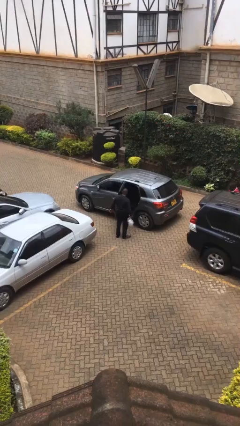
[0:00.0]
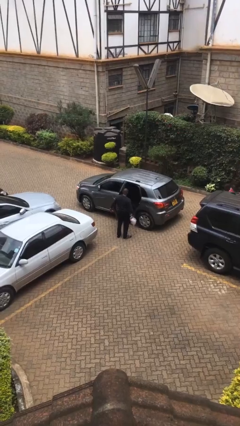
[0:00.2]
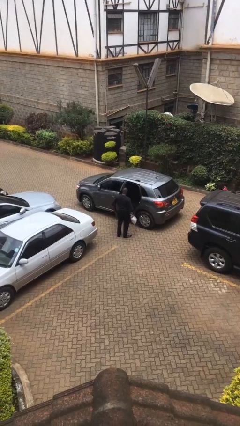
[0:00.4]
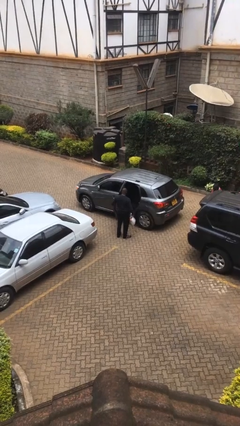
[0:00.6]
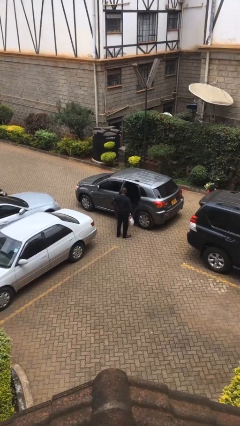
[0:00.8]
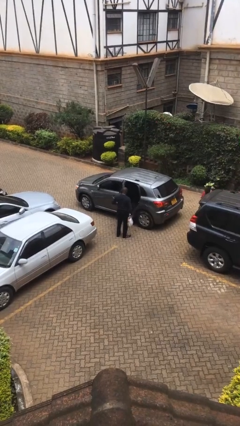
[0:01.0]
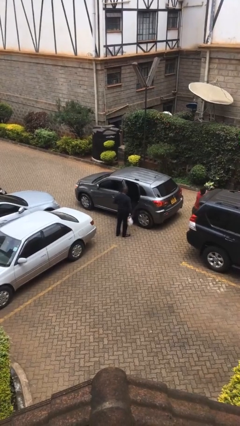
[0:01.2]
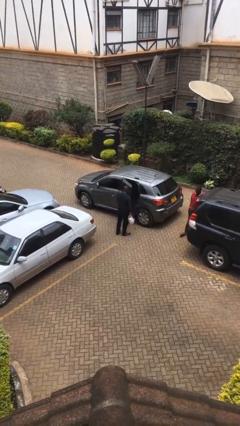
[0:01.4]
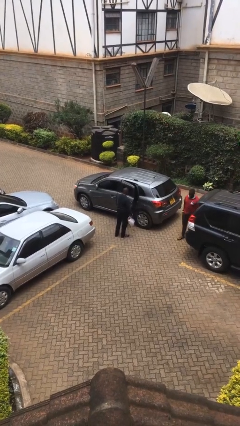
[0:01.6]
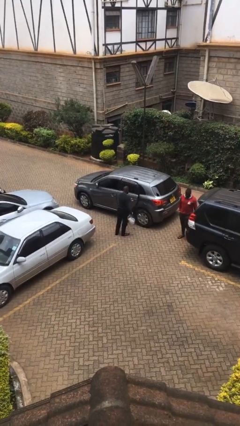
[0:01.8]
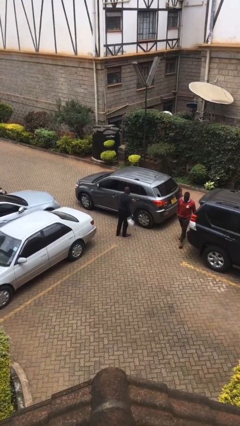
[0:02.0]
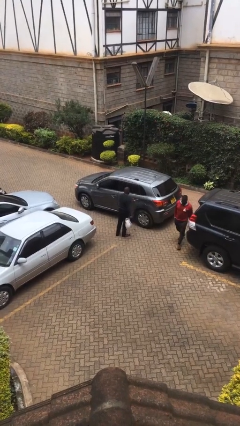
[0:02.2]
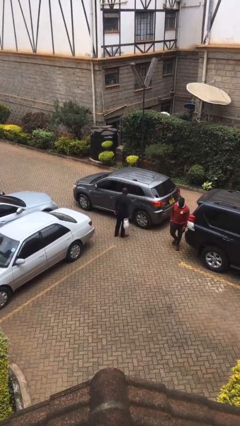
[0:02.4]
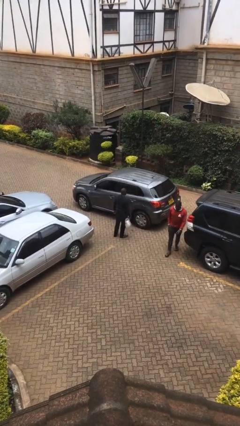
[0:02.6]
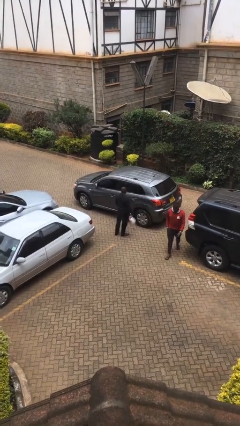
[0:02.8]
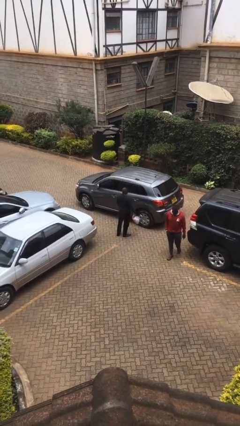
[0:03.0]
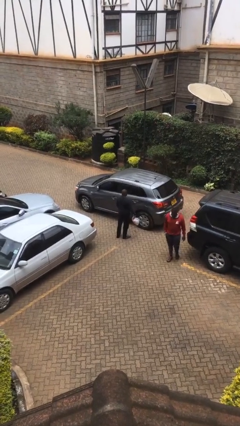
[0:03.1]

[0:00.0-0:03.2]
person closes car door

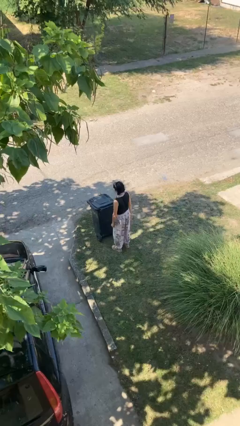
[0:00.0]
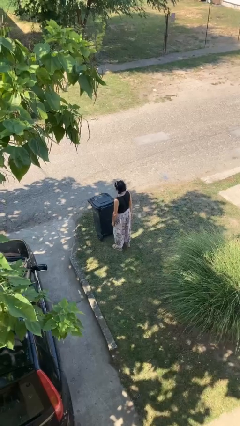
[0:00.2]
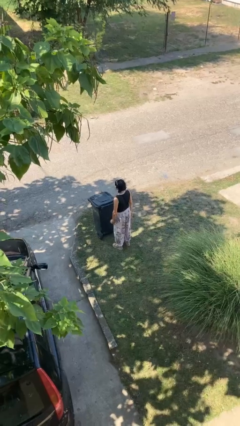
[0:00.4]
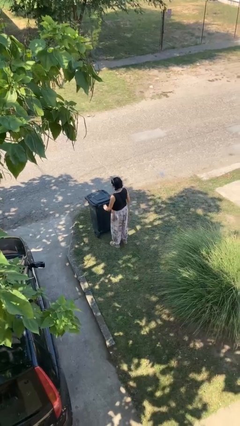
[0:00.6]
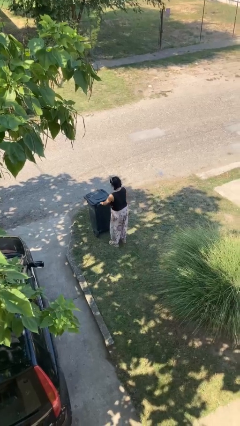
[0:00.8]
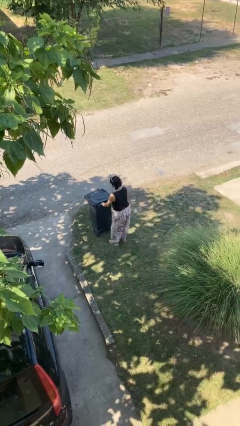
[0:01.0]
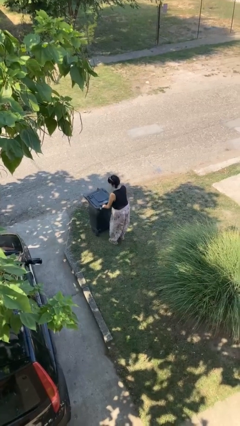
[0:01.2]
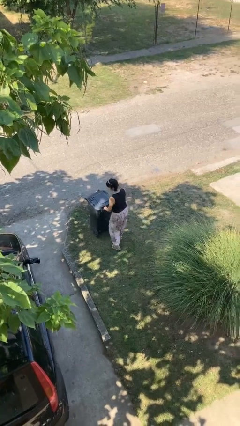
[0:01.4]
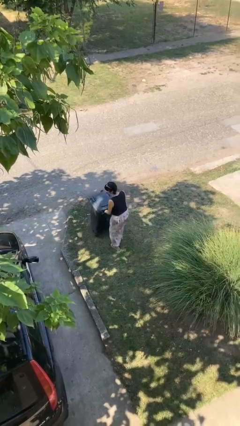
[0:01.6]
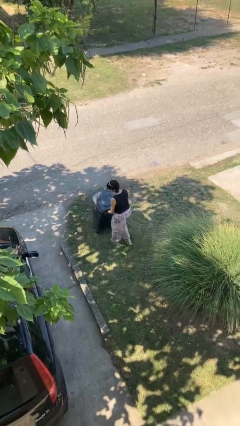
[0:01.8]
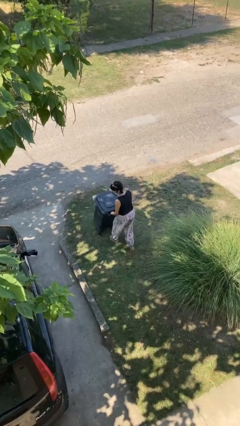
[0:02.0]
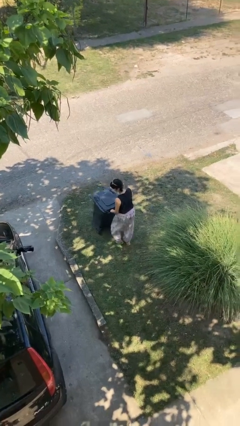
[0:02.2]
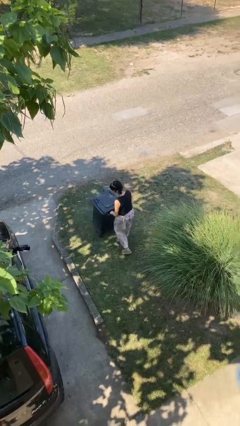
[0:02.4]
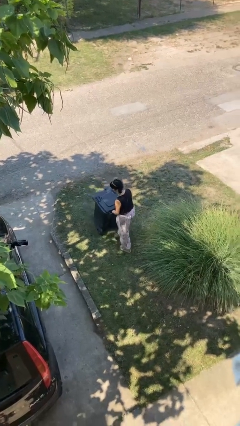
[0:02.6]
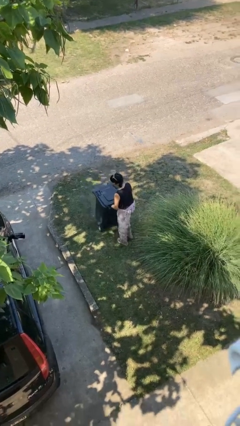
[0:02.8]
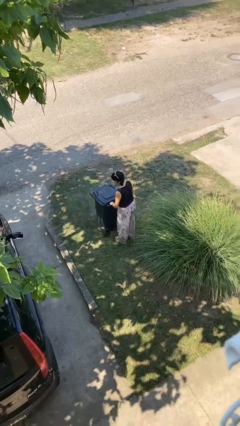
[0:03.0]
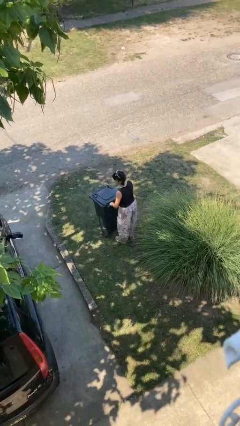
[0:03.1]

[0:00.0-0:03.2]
person pulls wheeled trashcan

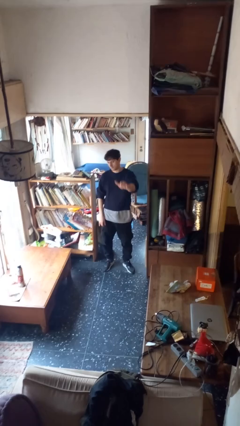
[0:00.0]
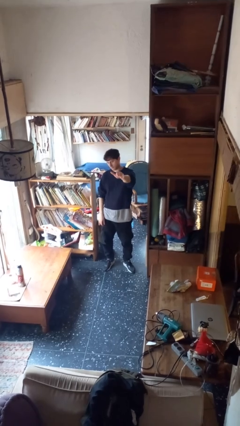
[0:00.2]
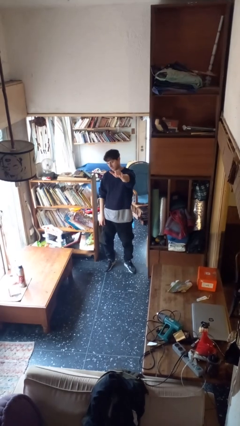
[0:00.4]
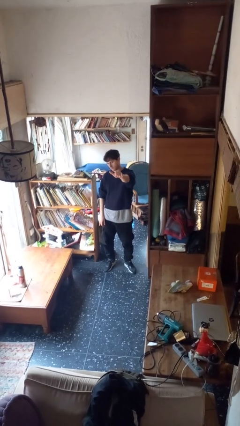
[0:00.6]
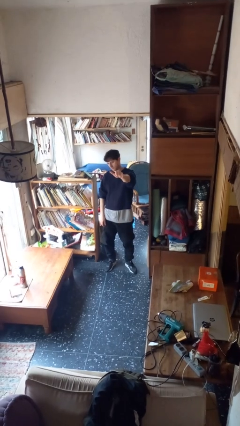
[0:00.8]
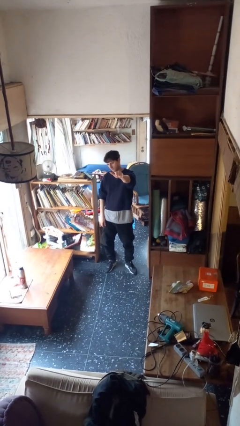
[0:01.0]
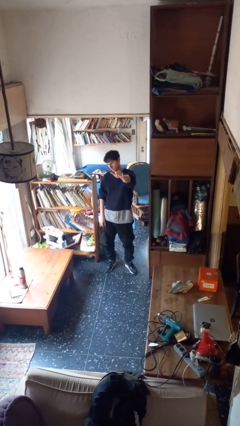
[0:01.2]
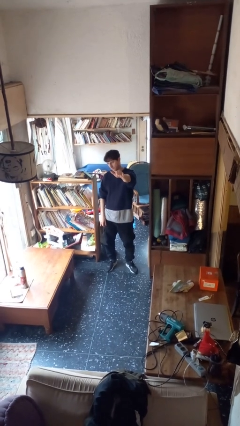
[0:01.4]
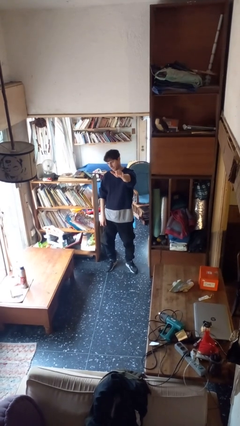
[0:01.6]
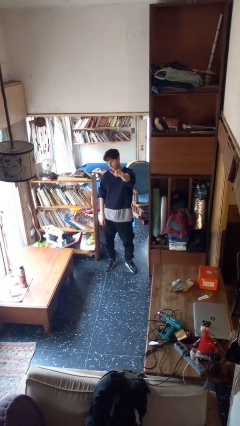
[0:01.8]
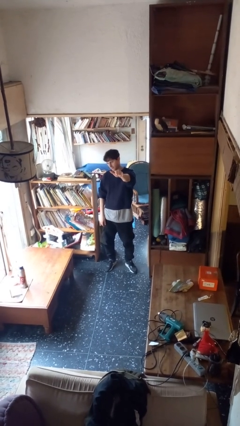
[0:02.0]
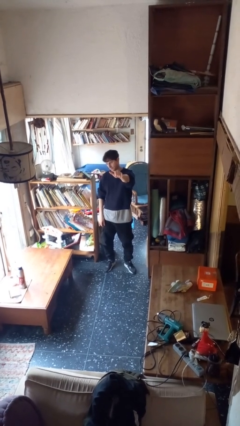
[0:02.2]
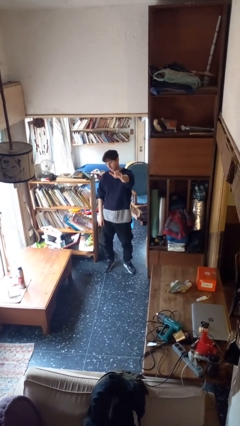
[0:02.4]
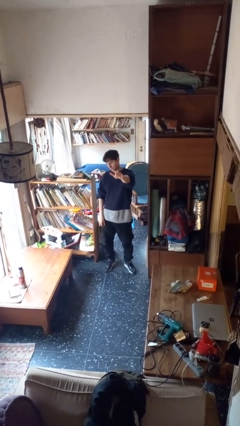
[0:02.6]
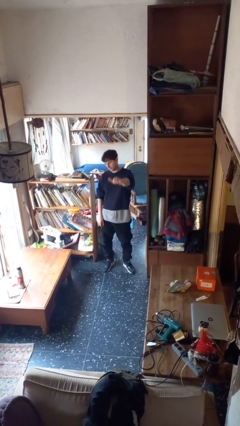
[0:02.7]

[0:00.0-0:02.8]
person gestures hang loose

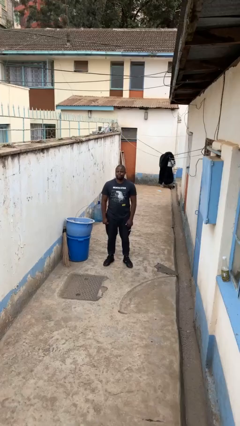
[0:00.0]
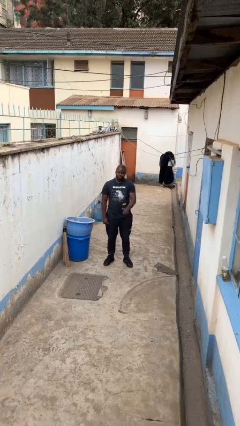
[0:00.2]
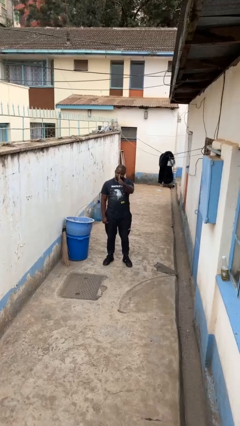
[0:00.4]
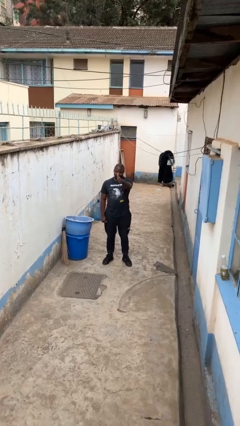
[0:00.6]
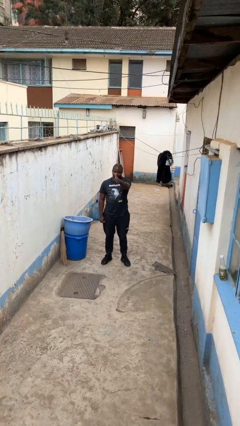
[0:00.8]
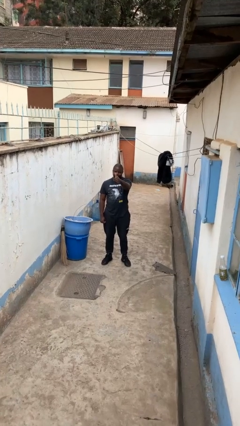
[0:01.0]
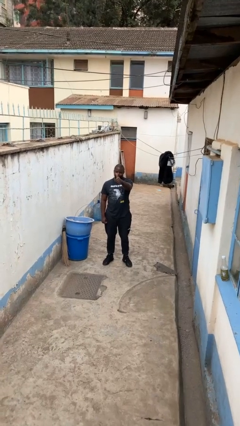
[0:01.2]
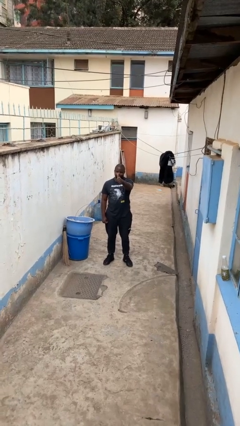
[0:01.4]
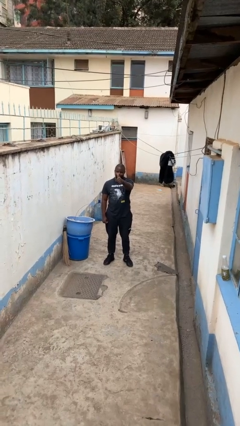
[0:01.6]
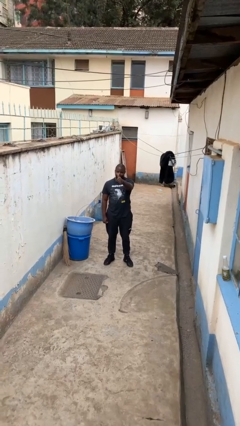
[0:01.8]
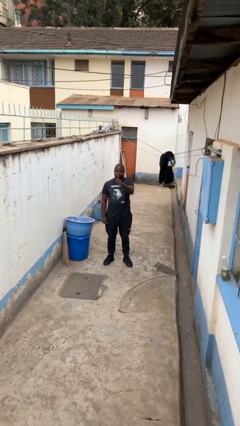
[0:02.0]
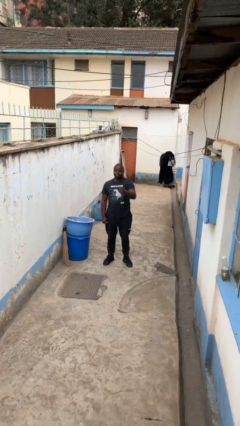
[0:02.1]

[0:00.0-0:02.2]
person gestures thumbs up

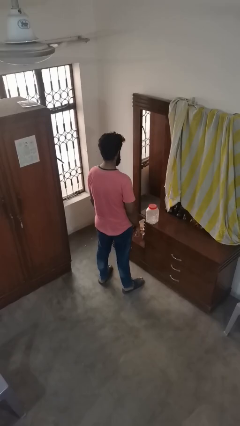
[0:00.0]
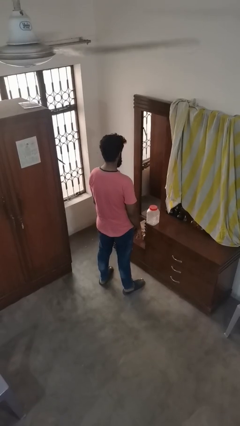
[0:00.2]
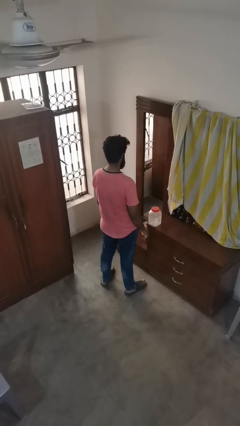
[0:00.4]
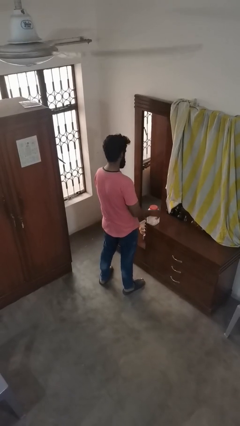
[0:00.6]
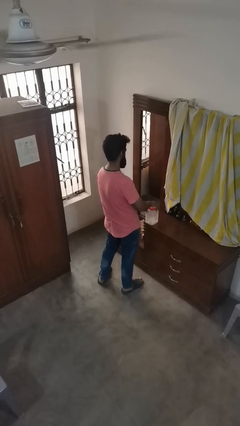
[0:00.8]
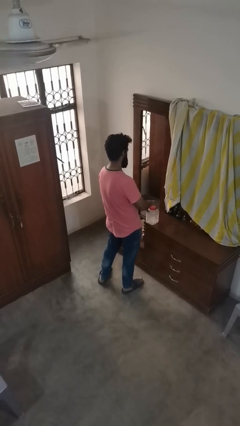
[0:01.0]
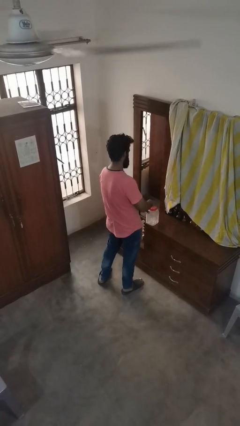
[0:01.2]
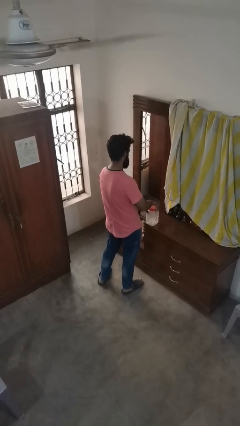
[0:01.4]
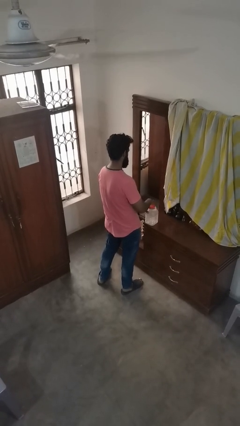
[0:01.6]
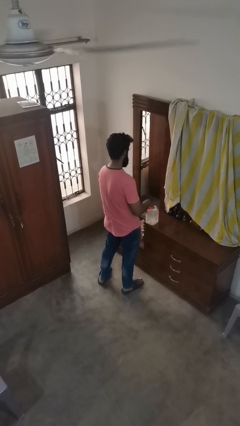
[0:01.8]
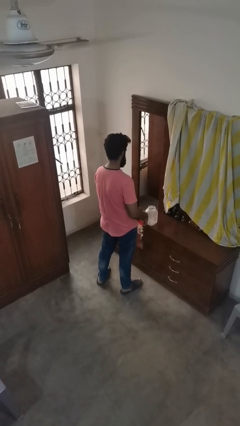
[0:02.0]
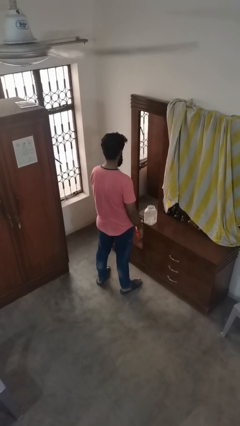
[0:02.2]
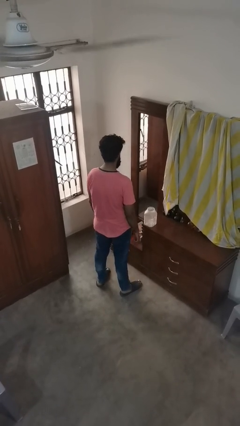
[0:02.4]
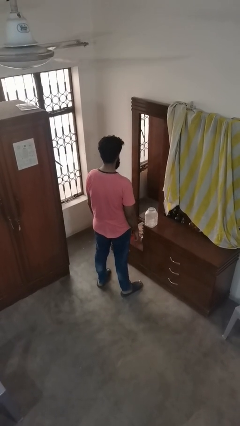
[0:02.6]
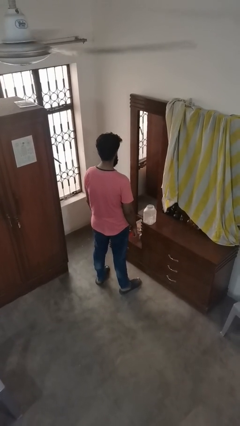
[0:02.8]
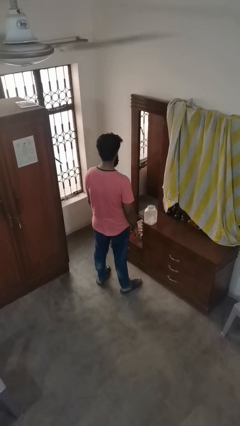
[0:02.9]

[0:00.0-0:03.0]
person opens jar

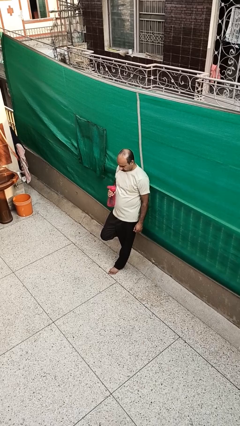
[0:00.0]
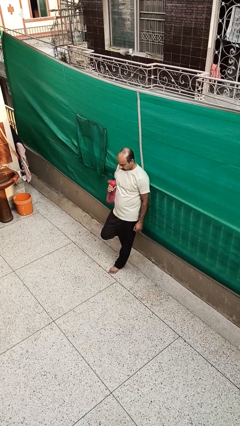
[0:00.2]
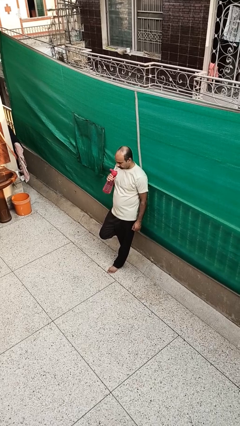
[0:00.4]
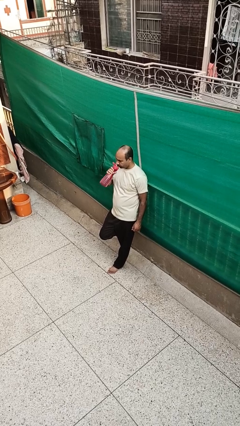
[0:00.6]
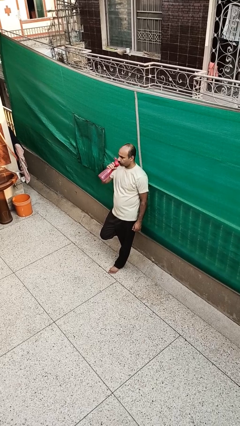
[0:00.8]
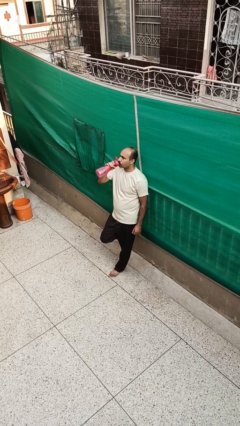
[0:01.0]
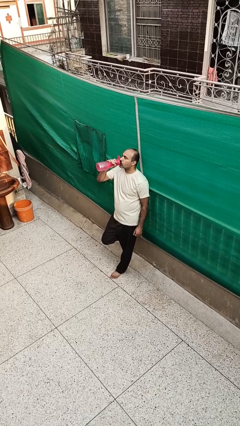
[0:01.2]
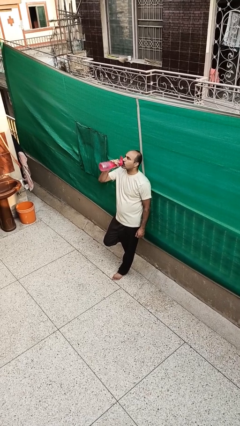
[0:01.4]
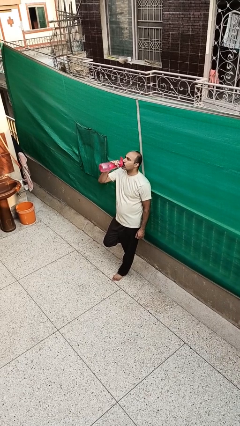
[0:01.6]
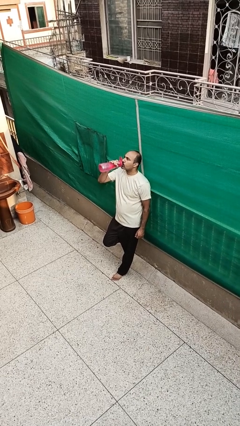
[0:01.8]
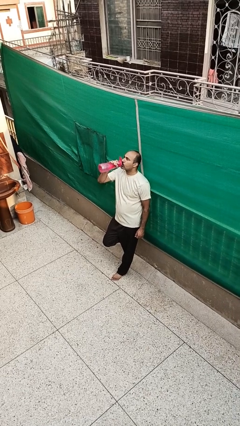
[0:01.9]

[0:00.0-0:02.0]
person drinks from bottle

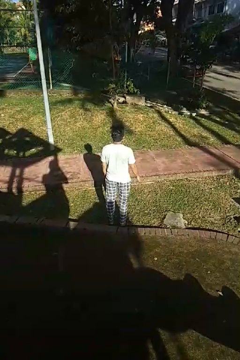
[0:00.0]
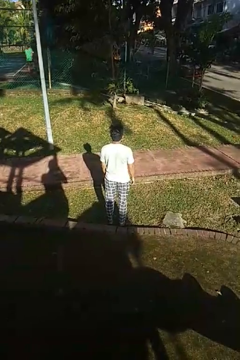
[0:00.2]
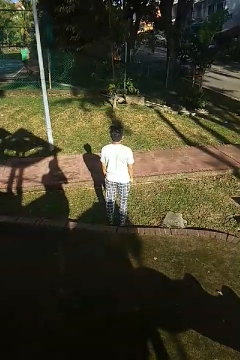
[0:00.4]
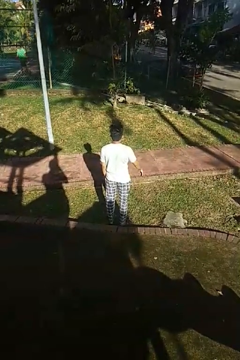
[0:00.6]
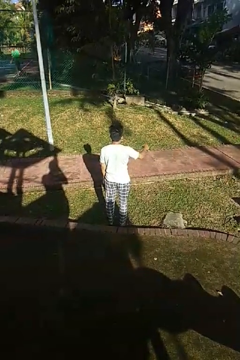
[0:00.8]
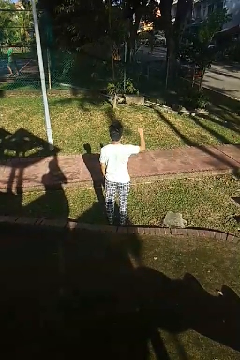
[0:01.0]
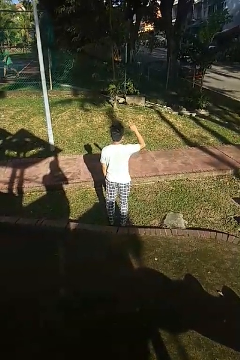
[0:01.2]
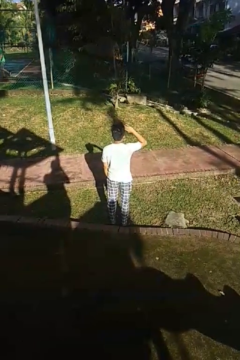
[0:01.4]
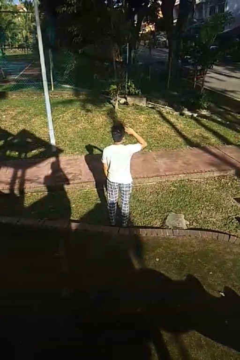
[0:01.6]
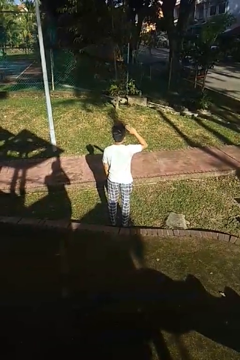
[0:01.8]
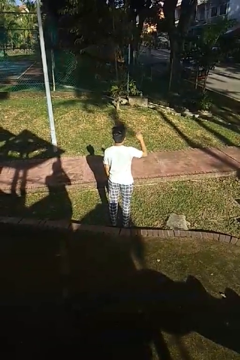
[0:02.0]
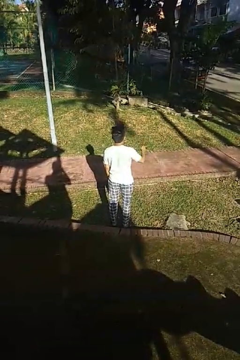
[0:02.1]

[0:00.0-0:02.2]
person salutes
